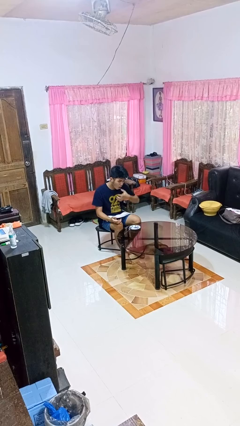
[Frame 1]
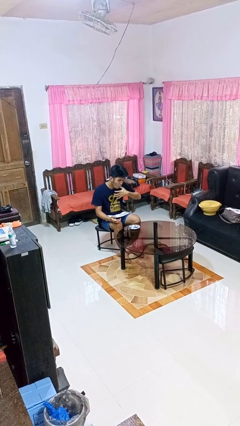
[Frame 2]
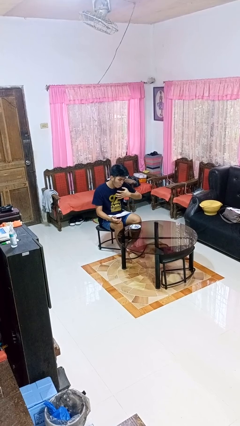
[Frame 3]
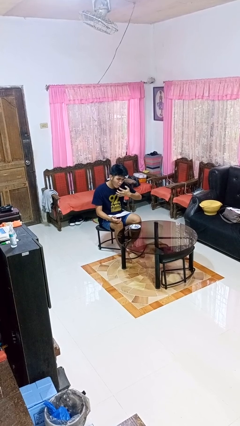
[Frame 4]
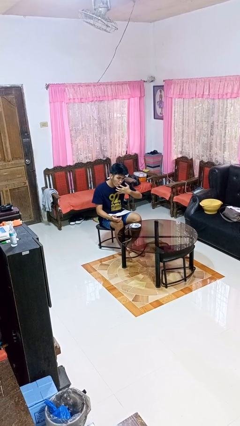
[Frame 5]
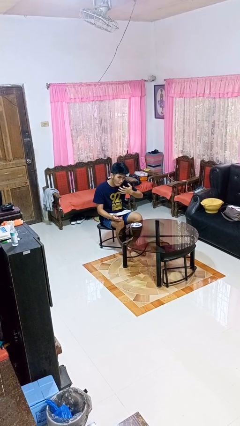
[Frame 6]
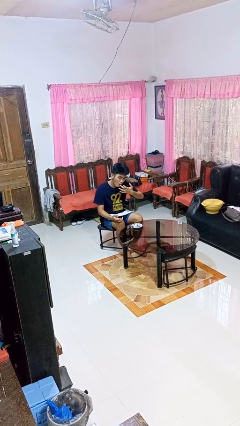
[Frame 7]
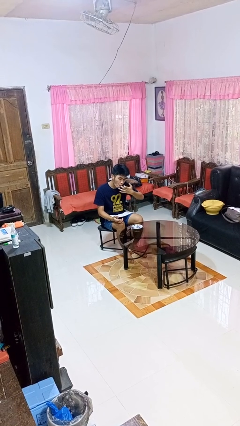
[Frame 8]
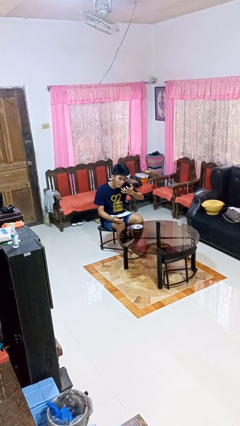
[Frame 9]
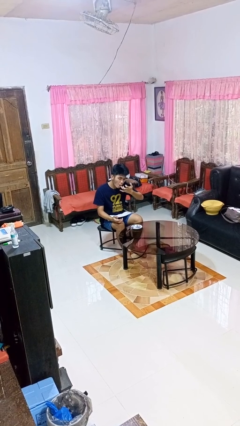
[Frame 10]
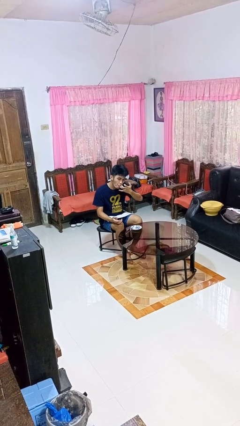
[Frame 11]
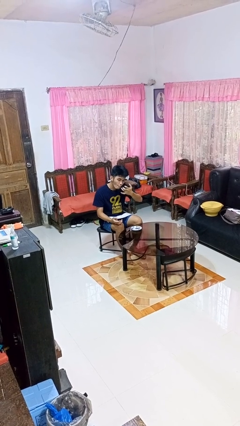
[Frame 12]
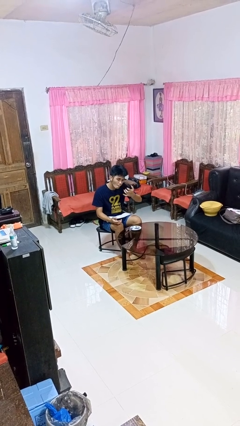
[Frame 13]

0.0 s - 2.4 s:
person licks fingers

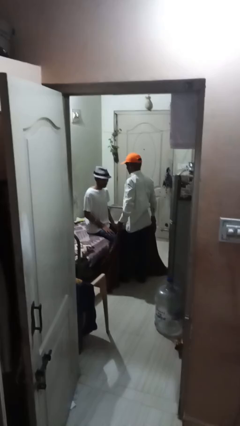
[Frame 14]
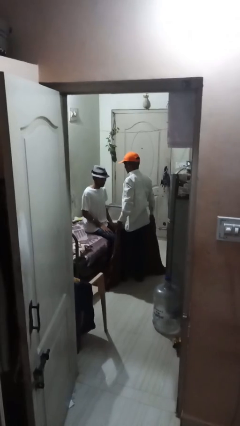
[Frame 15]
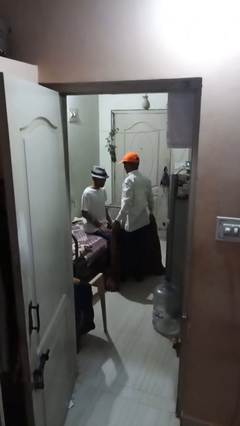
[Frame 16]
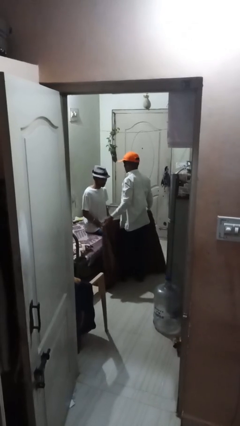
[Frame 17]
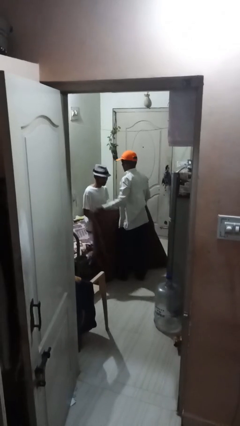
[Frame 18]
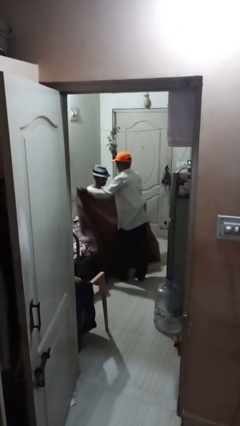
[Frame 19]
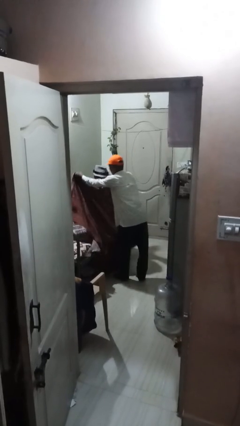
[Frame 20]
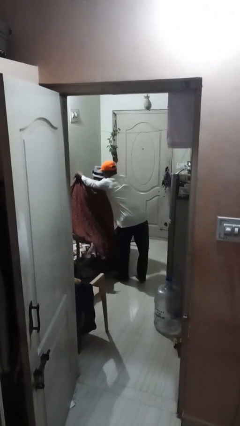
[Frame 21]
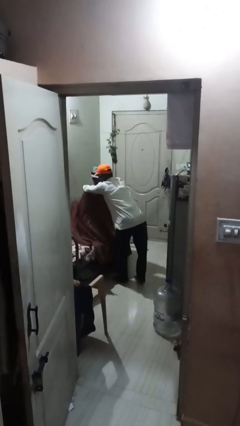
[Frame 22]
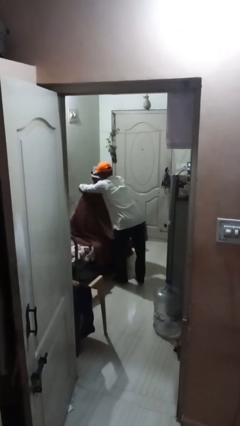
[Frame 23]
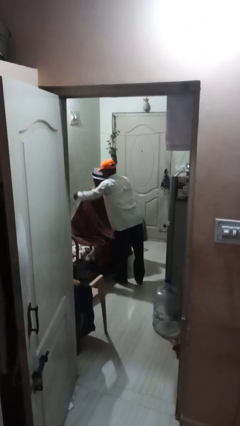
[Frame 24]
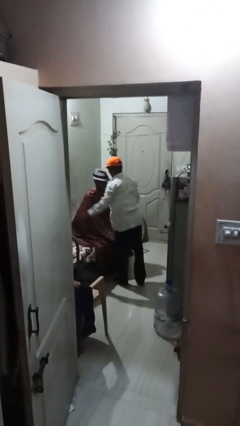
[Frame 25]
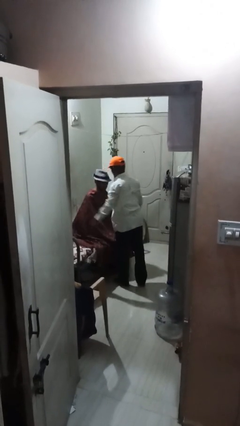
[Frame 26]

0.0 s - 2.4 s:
person uncovers friend with blanket

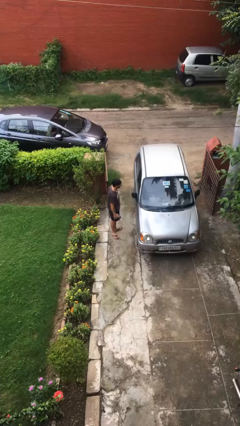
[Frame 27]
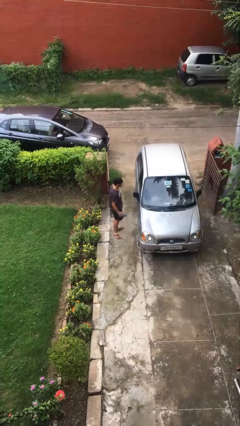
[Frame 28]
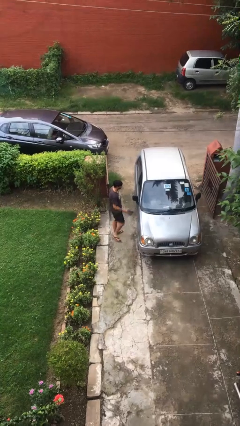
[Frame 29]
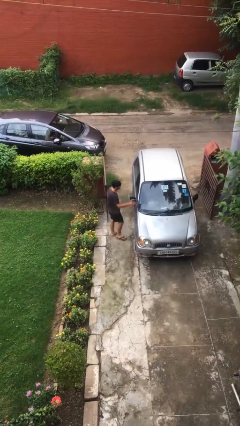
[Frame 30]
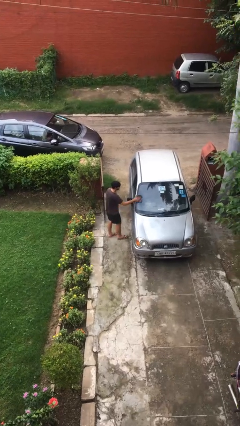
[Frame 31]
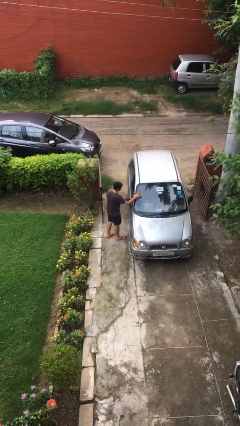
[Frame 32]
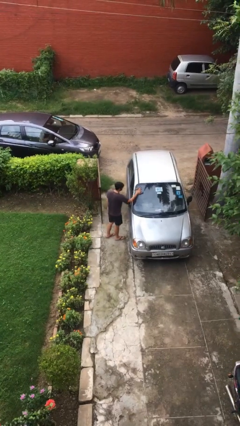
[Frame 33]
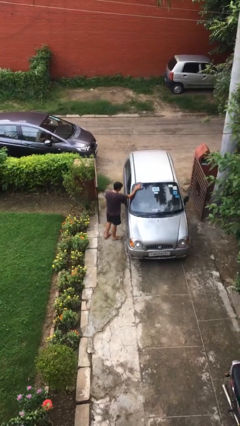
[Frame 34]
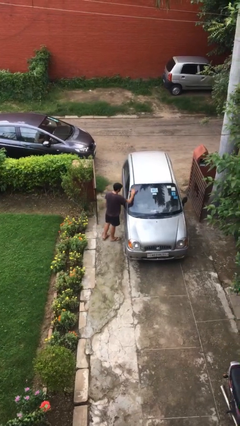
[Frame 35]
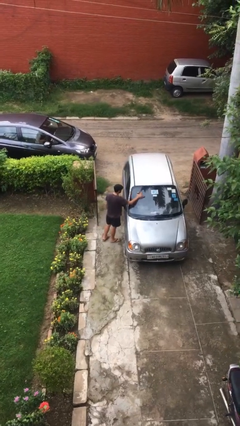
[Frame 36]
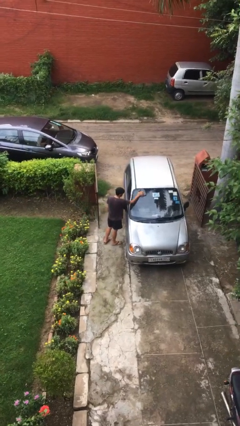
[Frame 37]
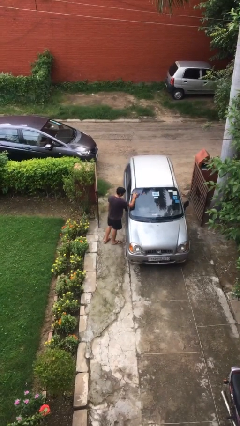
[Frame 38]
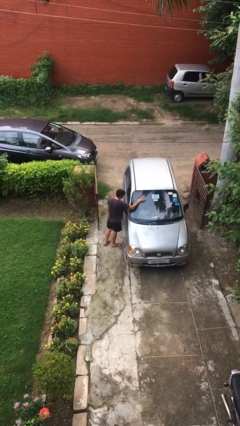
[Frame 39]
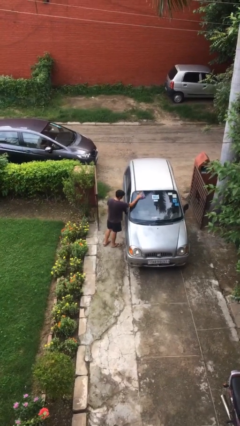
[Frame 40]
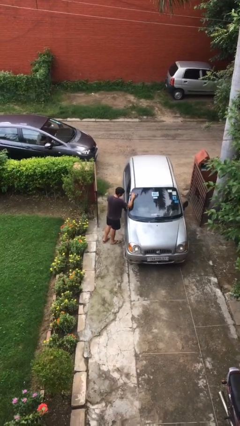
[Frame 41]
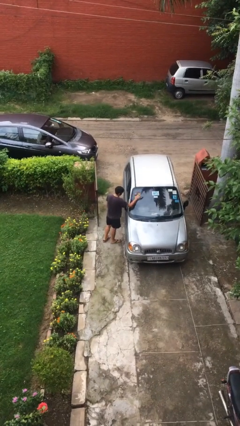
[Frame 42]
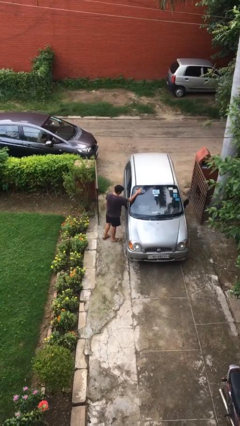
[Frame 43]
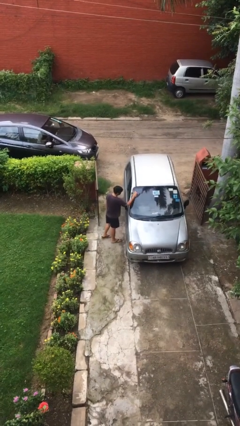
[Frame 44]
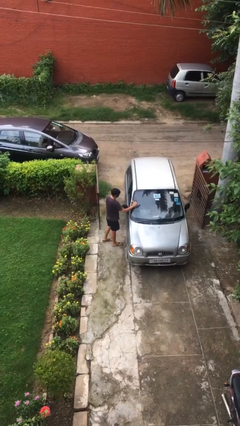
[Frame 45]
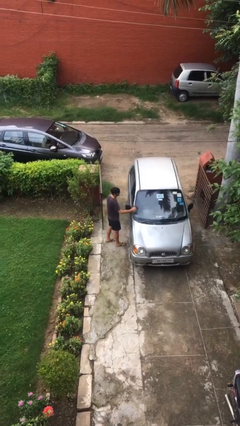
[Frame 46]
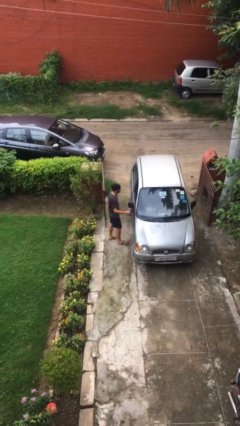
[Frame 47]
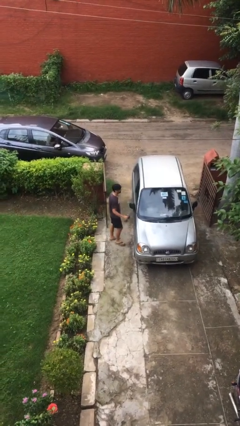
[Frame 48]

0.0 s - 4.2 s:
person polishes car with rag

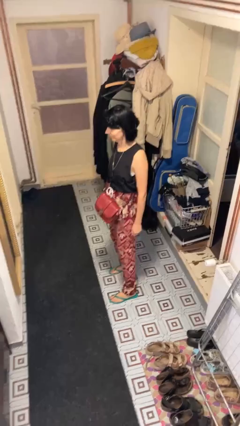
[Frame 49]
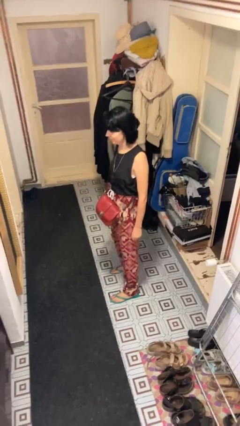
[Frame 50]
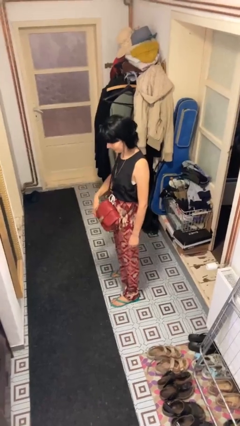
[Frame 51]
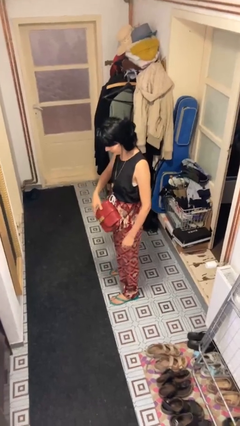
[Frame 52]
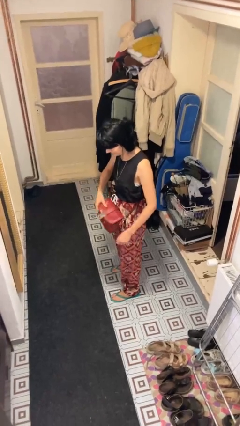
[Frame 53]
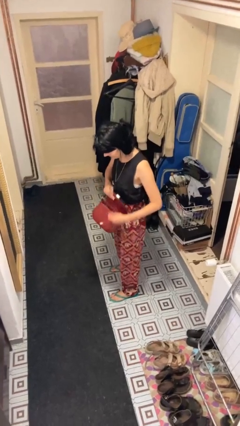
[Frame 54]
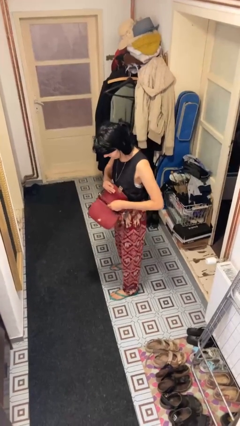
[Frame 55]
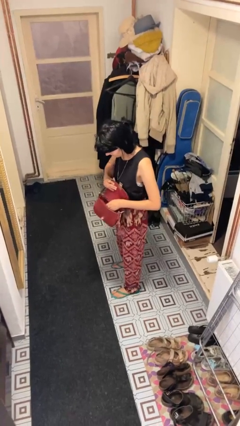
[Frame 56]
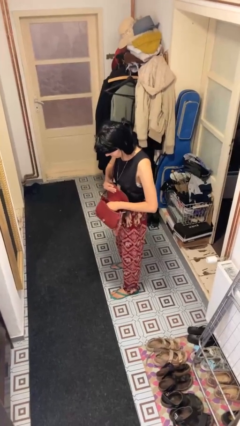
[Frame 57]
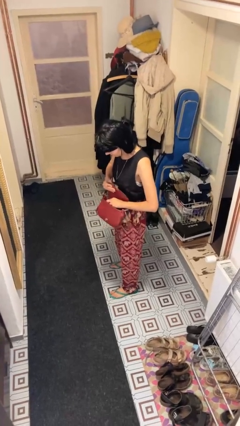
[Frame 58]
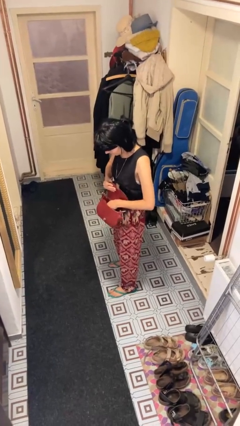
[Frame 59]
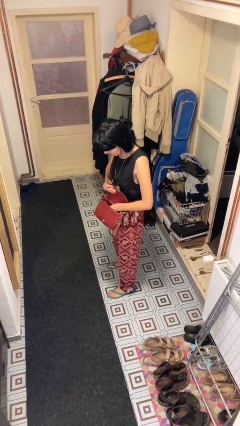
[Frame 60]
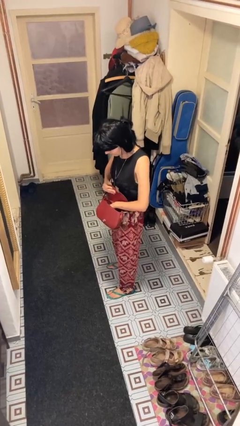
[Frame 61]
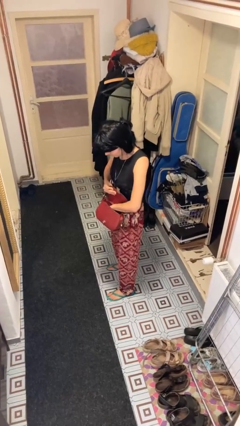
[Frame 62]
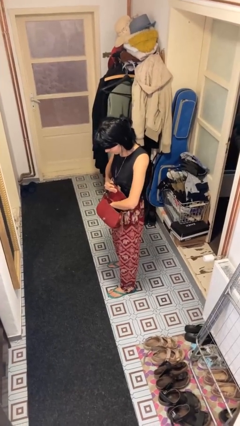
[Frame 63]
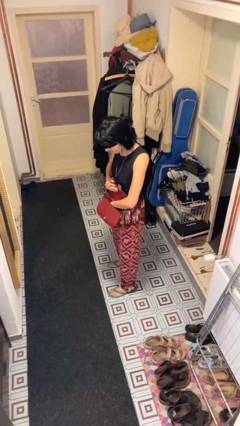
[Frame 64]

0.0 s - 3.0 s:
person searches in purse

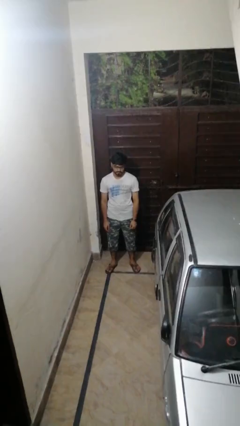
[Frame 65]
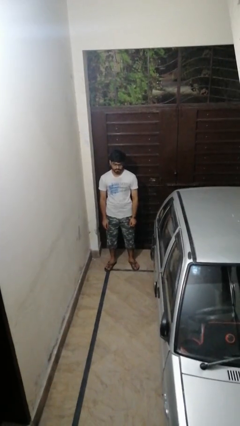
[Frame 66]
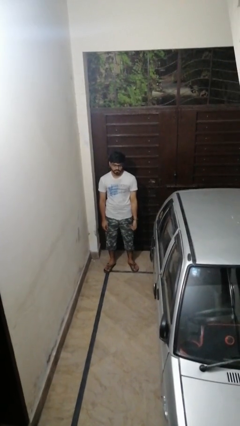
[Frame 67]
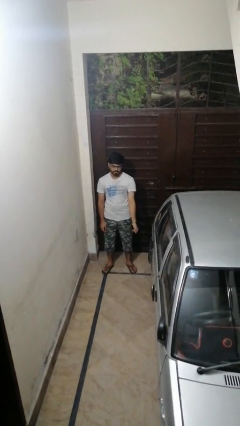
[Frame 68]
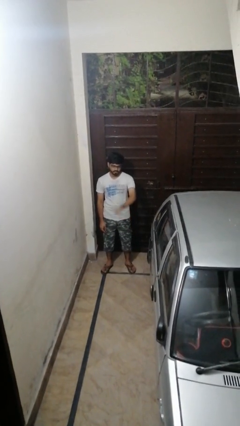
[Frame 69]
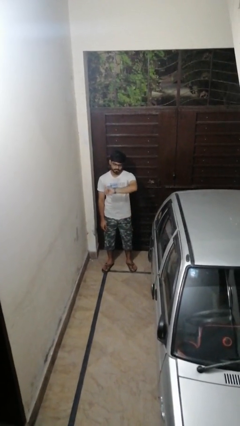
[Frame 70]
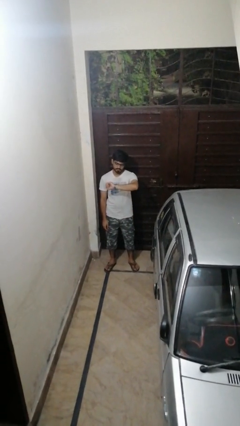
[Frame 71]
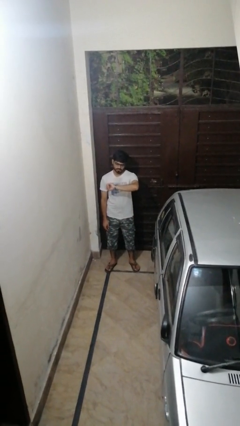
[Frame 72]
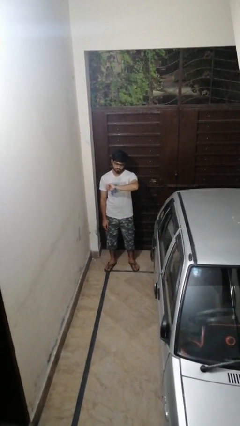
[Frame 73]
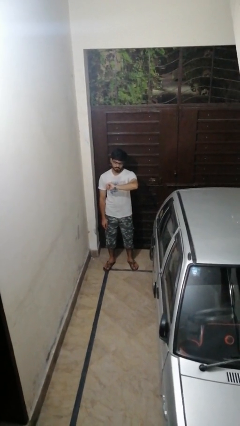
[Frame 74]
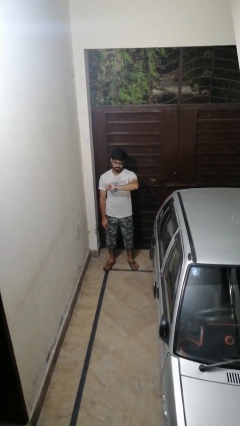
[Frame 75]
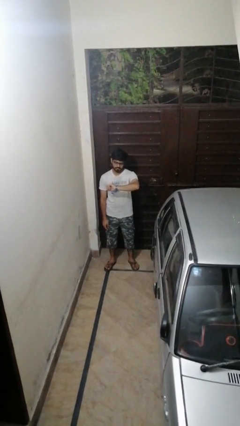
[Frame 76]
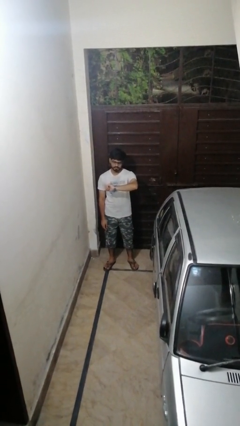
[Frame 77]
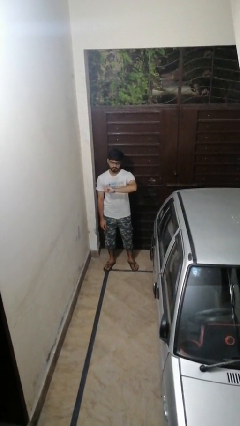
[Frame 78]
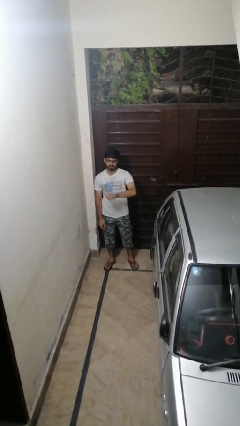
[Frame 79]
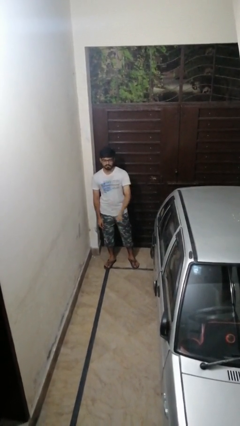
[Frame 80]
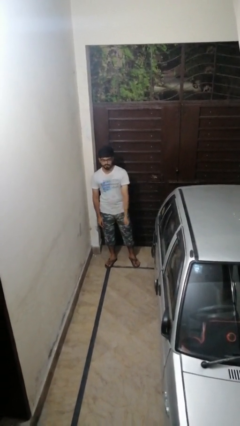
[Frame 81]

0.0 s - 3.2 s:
person looks at wristwatch

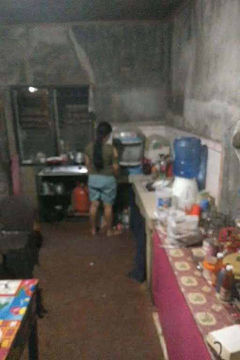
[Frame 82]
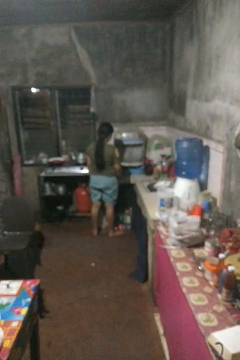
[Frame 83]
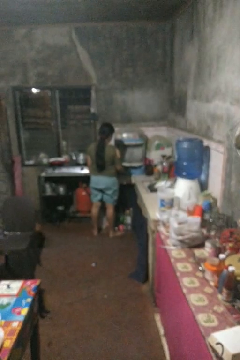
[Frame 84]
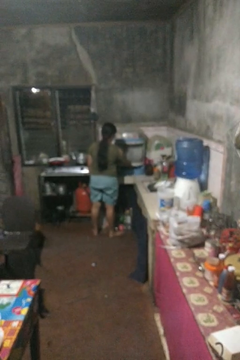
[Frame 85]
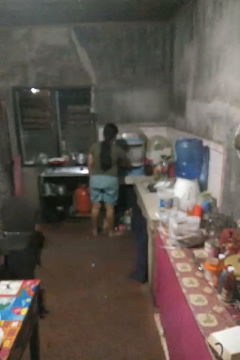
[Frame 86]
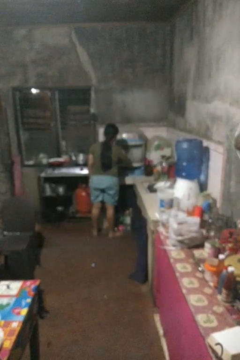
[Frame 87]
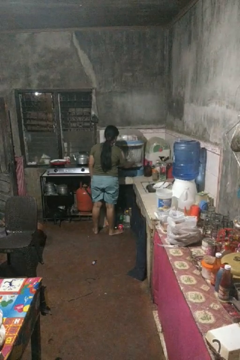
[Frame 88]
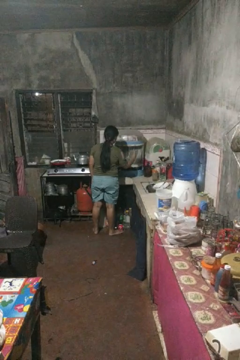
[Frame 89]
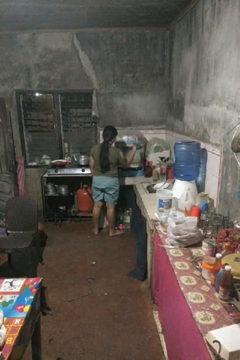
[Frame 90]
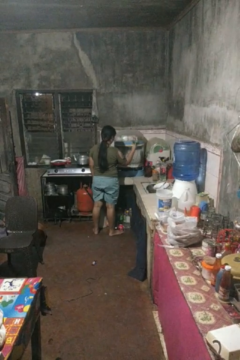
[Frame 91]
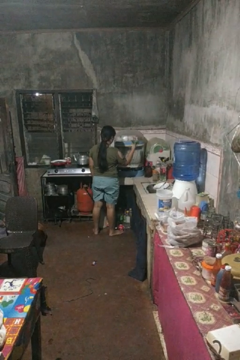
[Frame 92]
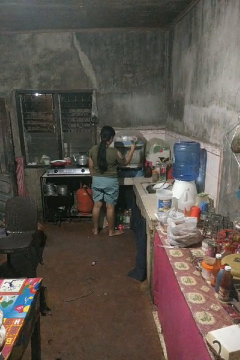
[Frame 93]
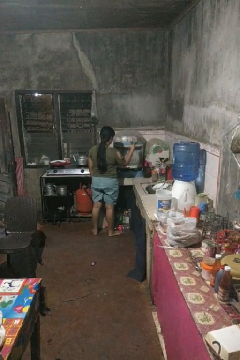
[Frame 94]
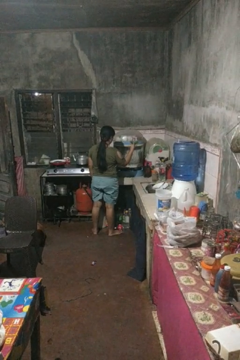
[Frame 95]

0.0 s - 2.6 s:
person takes object from kitchen drawer

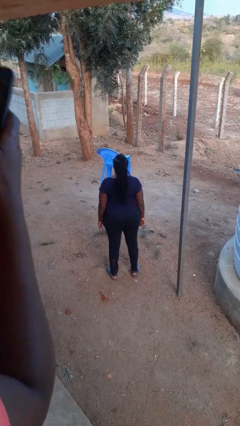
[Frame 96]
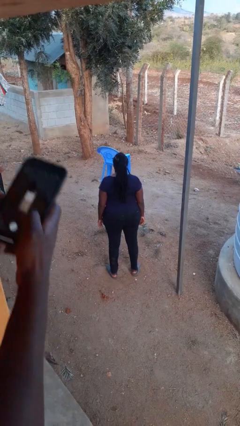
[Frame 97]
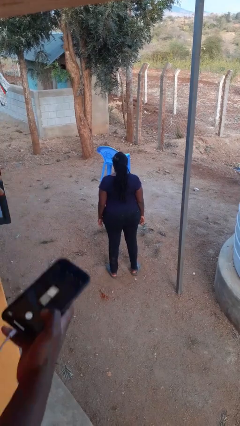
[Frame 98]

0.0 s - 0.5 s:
person twirls
